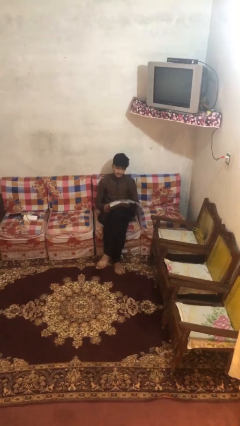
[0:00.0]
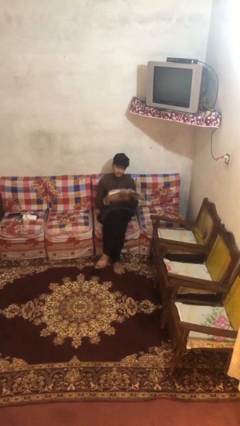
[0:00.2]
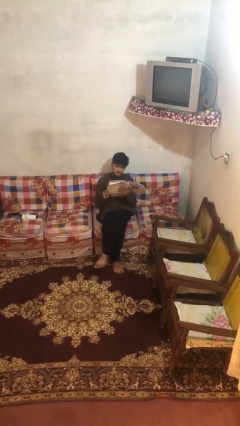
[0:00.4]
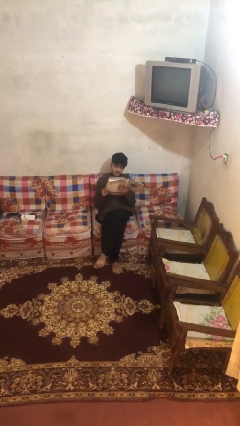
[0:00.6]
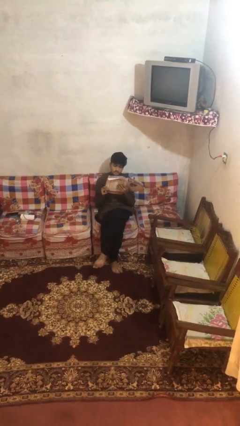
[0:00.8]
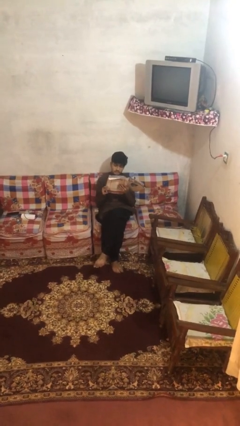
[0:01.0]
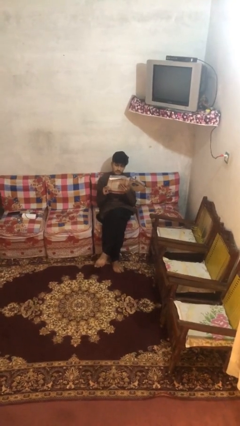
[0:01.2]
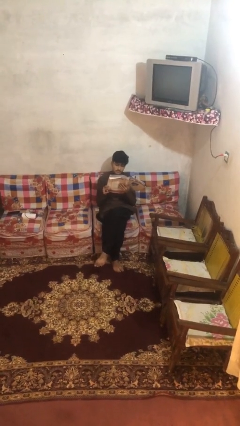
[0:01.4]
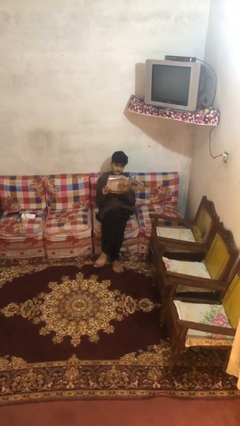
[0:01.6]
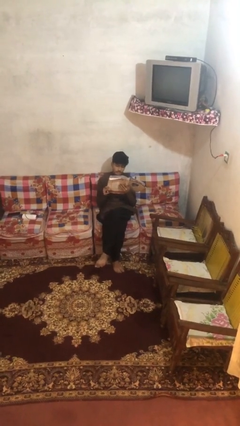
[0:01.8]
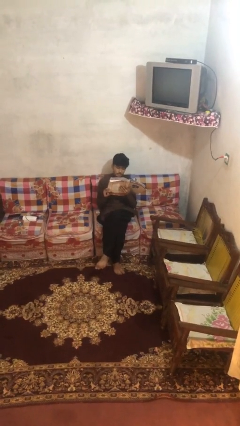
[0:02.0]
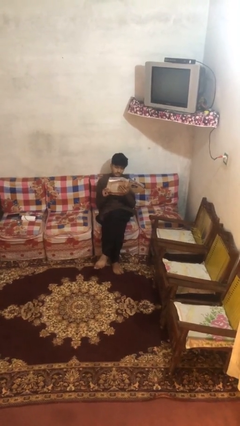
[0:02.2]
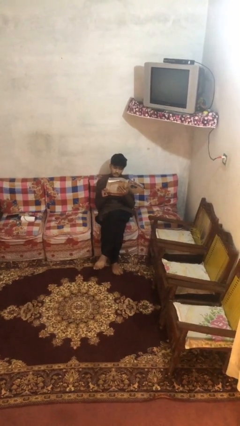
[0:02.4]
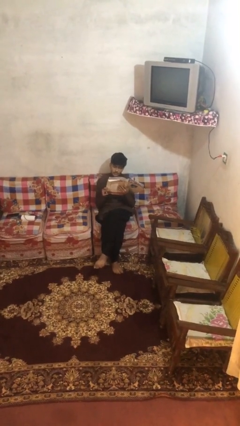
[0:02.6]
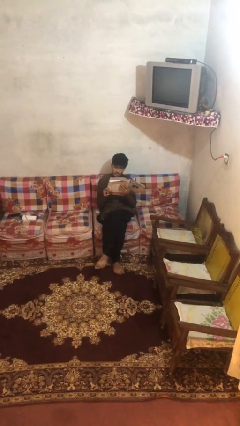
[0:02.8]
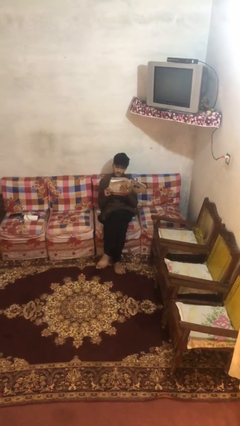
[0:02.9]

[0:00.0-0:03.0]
person reads document

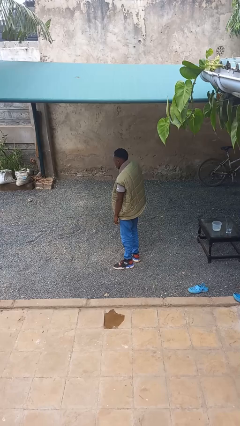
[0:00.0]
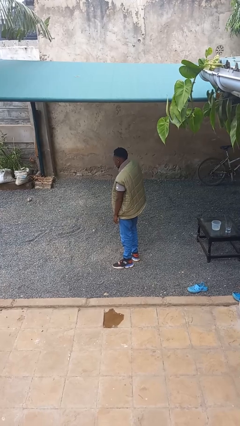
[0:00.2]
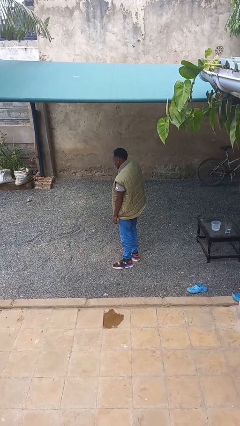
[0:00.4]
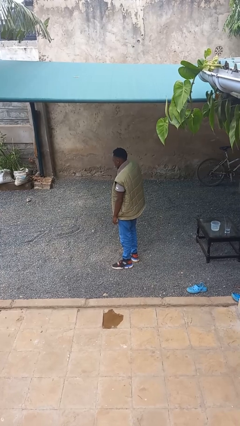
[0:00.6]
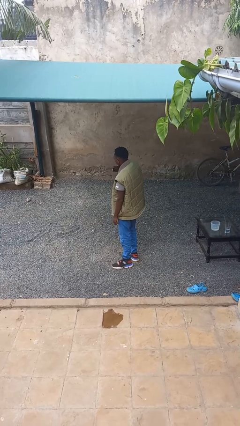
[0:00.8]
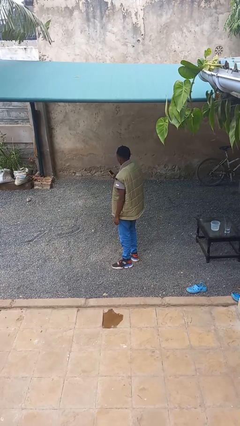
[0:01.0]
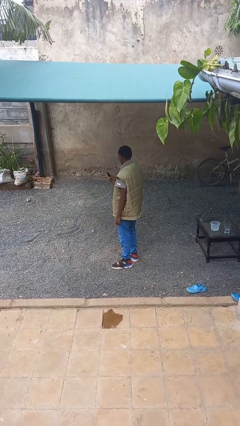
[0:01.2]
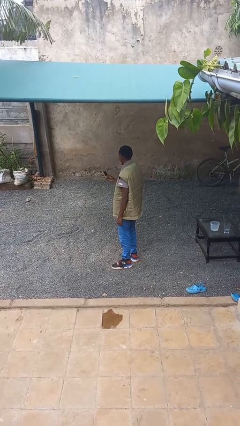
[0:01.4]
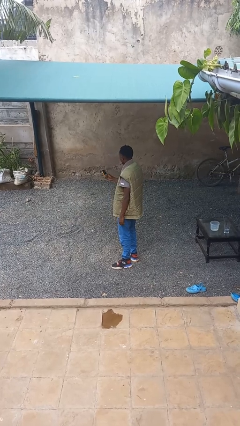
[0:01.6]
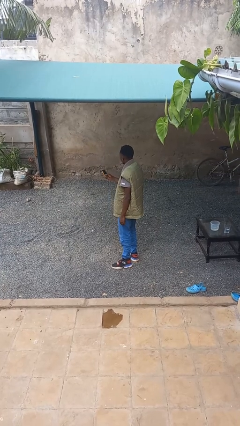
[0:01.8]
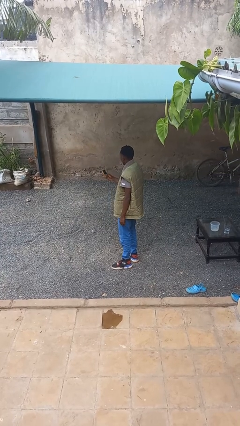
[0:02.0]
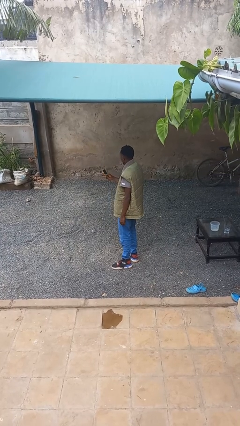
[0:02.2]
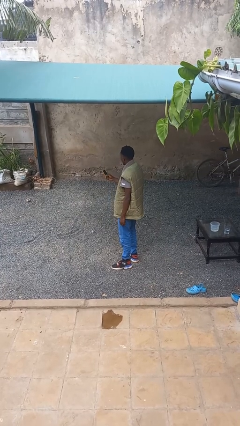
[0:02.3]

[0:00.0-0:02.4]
person takes phone from pocket

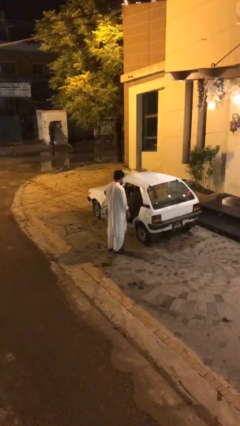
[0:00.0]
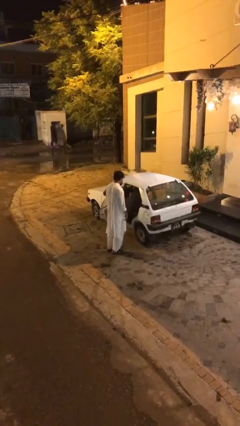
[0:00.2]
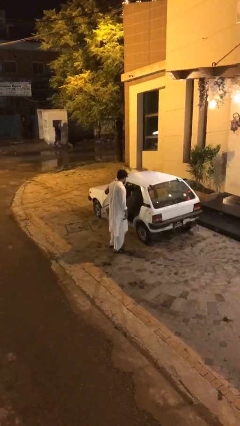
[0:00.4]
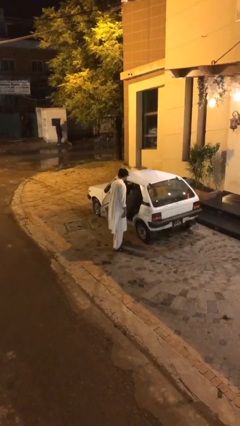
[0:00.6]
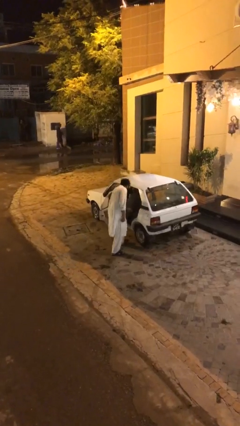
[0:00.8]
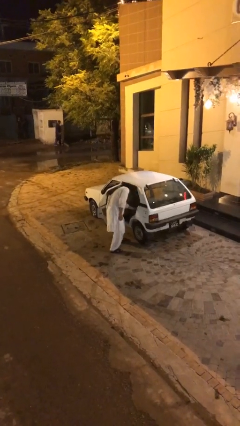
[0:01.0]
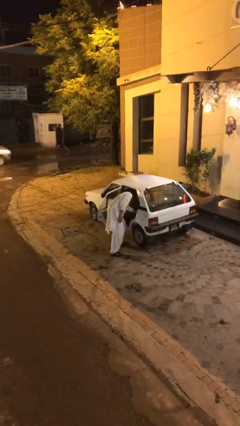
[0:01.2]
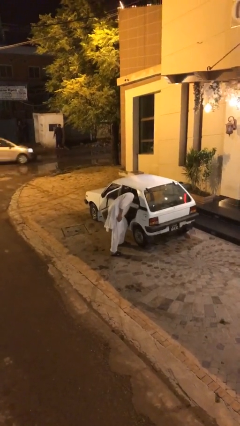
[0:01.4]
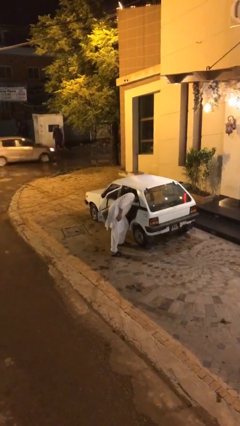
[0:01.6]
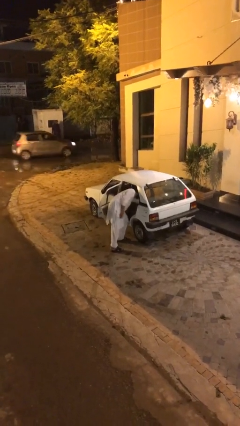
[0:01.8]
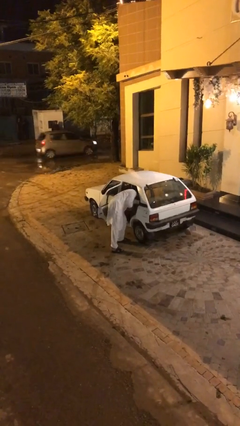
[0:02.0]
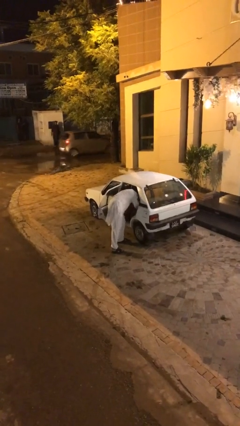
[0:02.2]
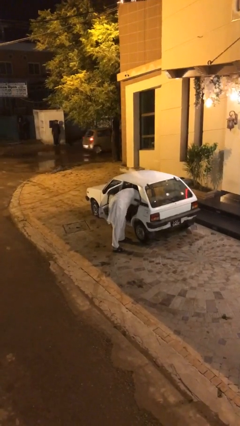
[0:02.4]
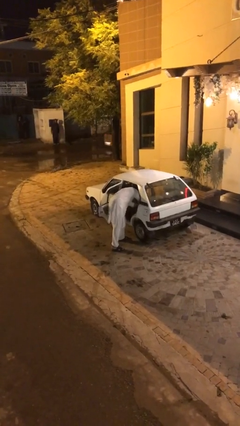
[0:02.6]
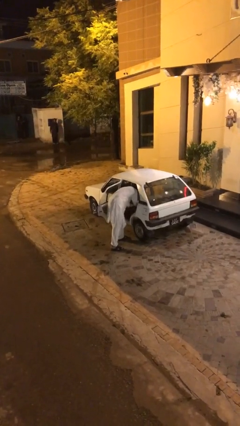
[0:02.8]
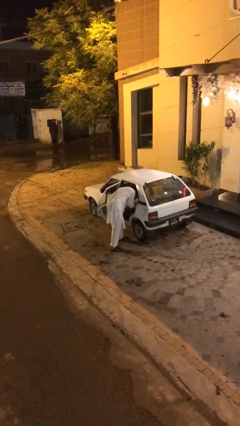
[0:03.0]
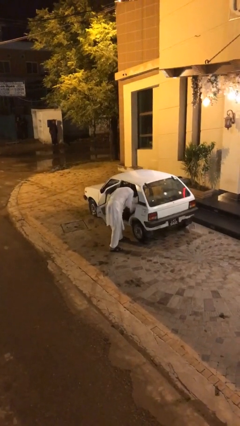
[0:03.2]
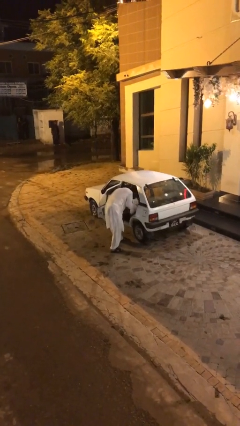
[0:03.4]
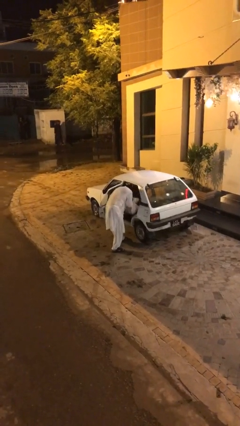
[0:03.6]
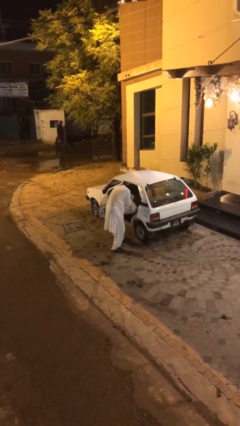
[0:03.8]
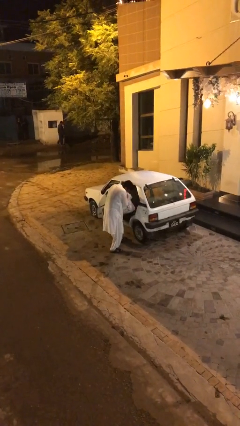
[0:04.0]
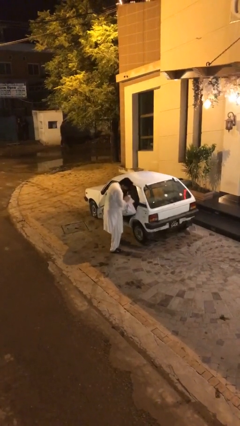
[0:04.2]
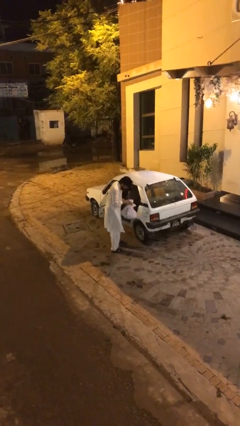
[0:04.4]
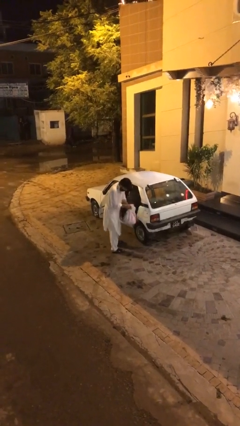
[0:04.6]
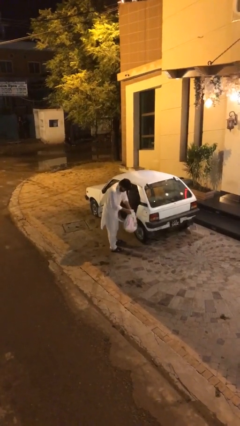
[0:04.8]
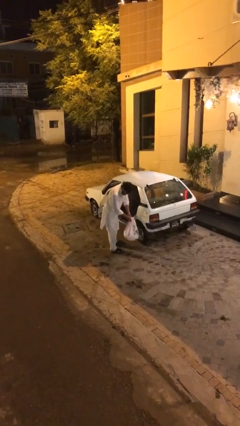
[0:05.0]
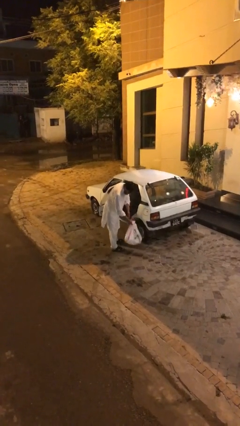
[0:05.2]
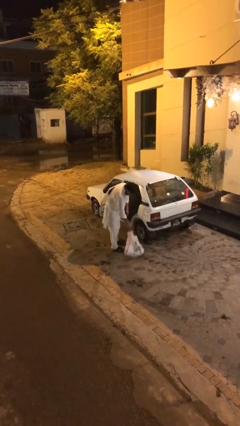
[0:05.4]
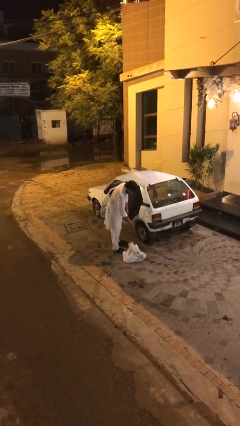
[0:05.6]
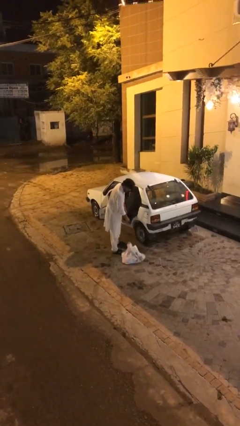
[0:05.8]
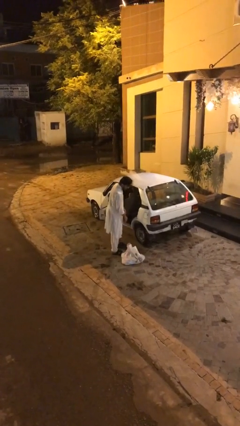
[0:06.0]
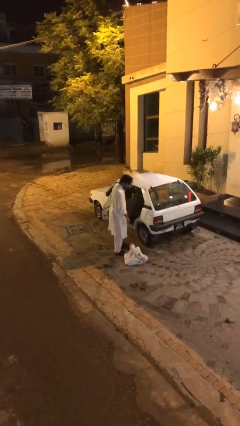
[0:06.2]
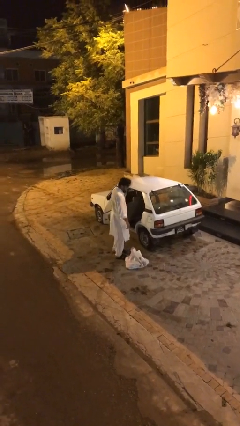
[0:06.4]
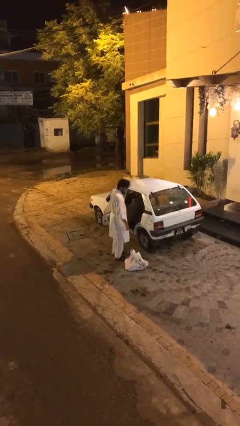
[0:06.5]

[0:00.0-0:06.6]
person unloads car

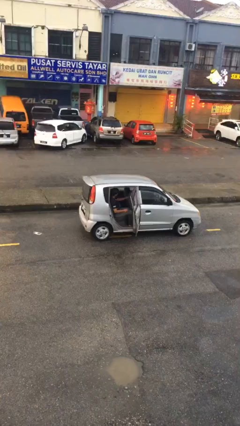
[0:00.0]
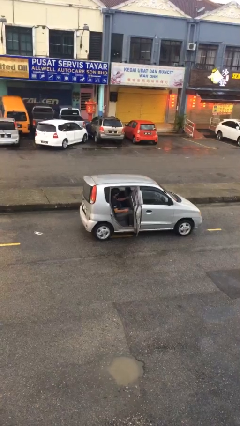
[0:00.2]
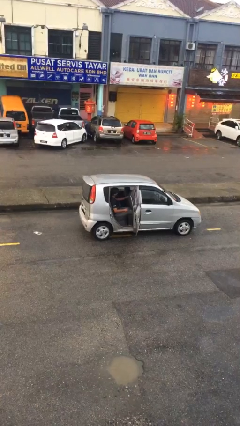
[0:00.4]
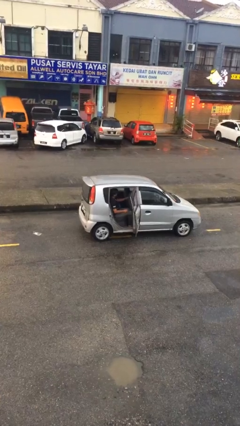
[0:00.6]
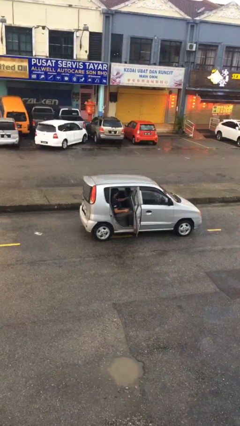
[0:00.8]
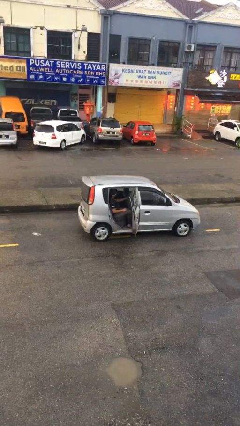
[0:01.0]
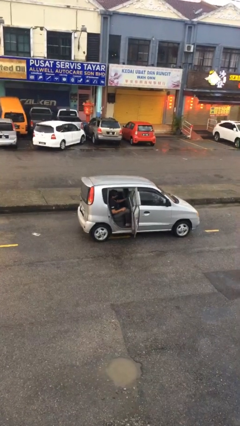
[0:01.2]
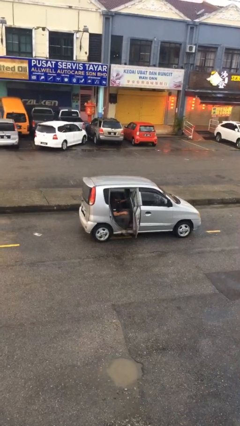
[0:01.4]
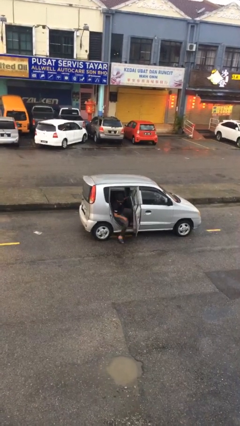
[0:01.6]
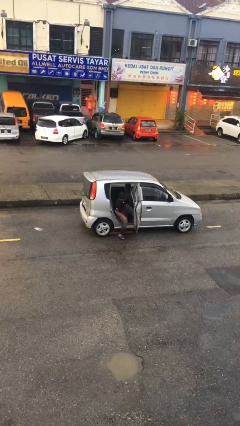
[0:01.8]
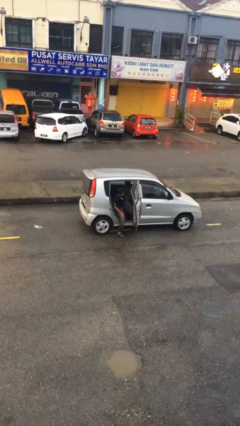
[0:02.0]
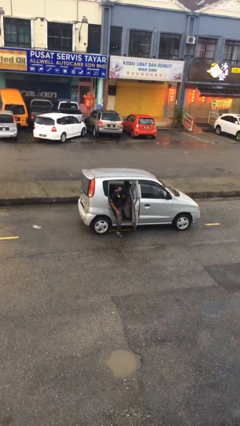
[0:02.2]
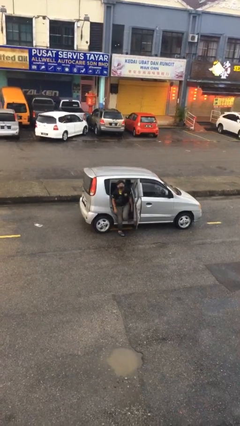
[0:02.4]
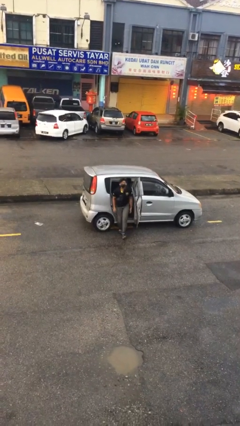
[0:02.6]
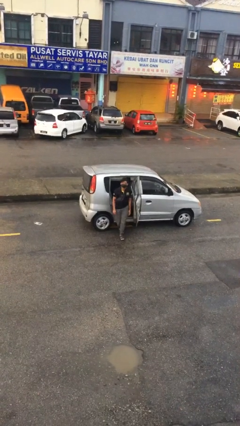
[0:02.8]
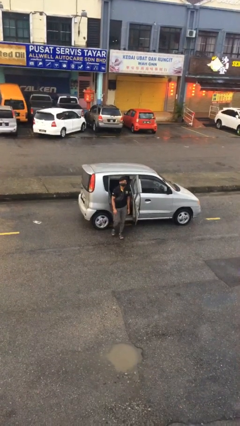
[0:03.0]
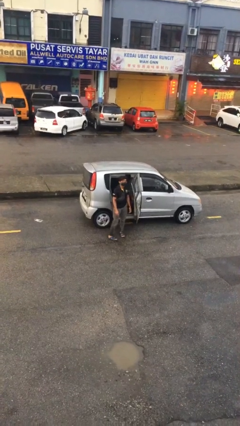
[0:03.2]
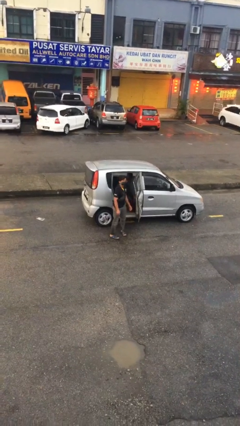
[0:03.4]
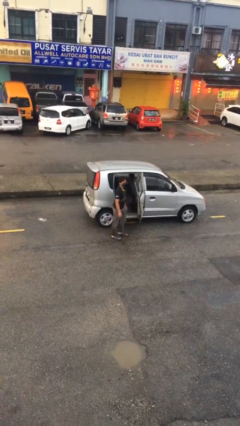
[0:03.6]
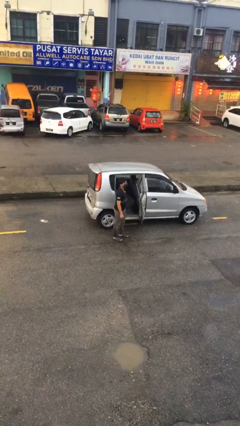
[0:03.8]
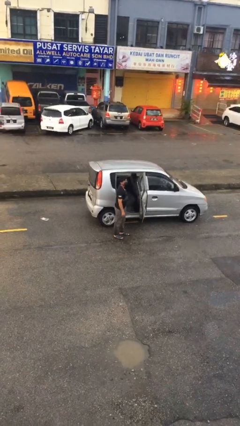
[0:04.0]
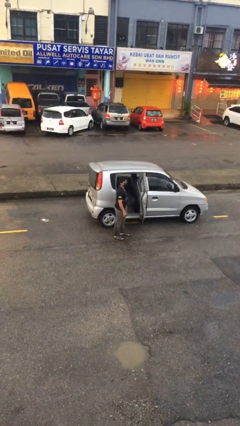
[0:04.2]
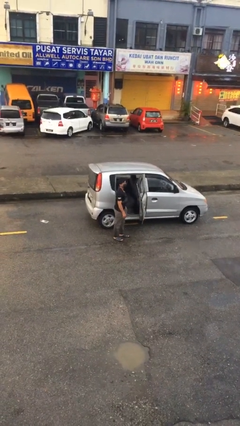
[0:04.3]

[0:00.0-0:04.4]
person exits car

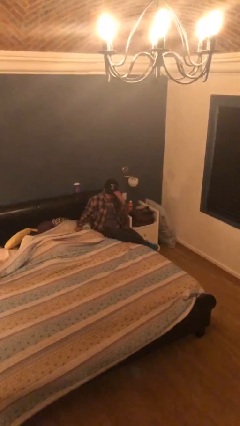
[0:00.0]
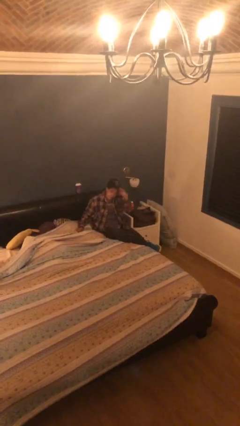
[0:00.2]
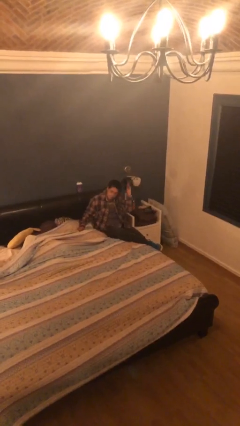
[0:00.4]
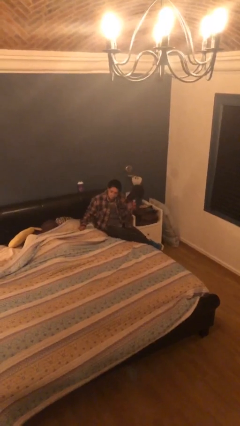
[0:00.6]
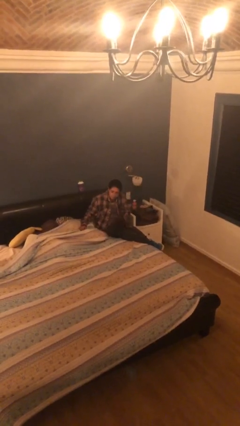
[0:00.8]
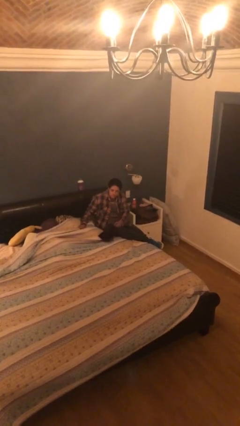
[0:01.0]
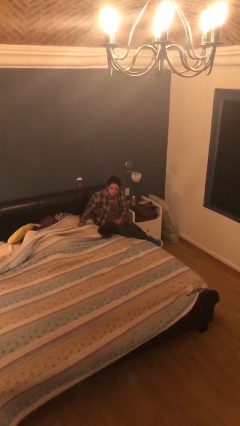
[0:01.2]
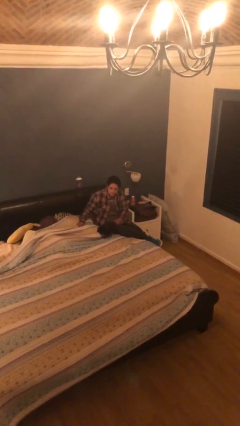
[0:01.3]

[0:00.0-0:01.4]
person takes off hat
